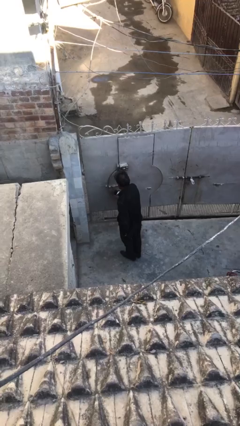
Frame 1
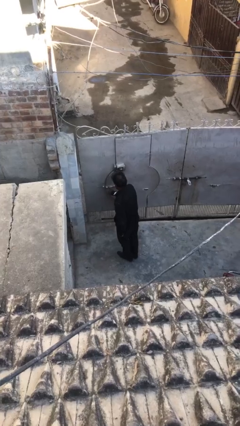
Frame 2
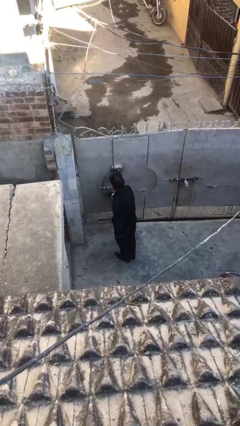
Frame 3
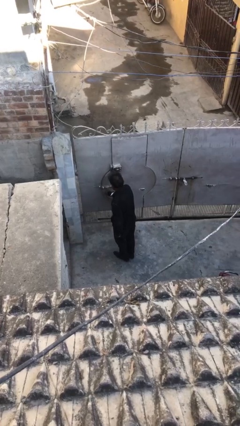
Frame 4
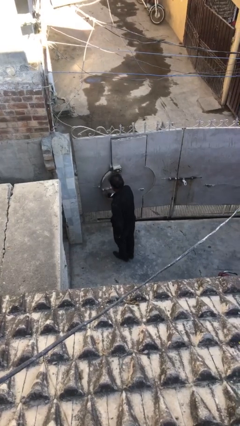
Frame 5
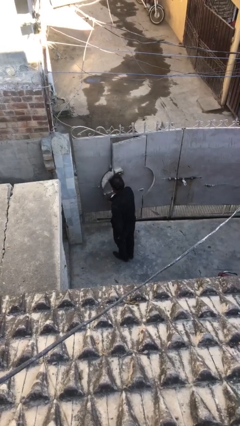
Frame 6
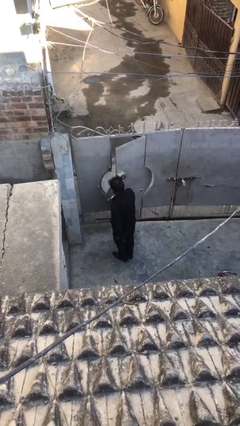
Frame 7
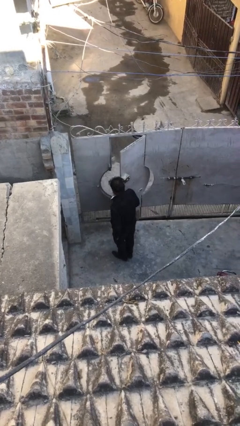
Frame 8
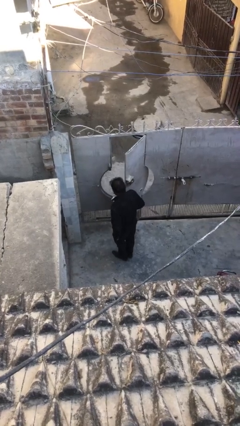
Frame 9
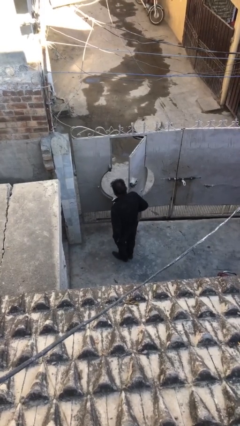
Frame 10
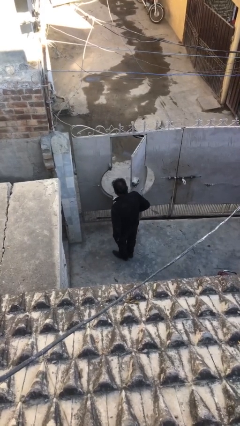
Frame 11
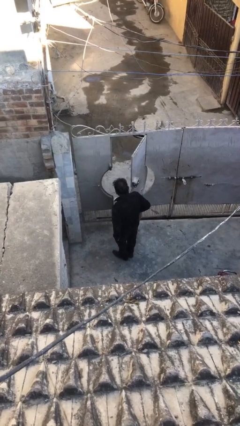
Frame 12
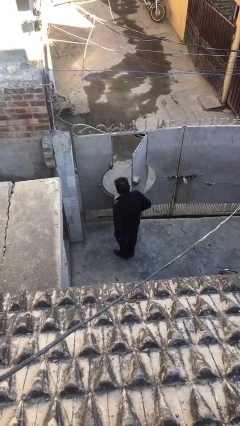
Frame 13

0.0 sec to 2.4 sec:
person opens facility door

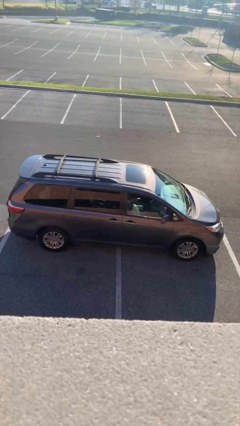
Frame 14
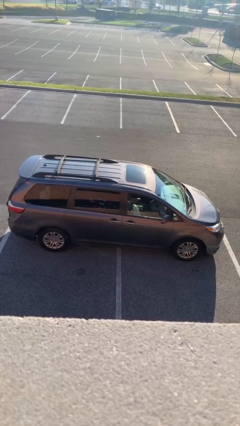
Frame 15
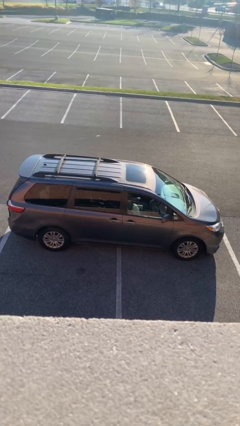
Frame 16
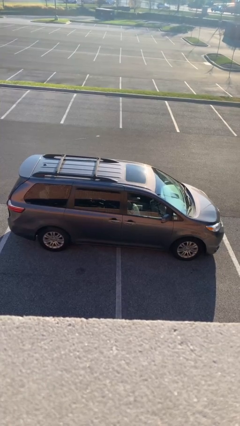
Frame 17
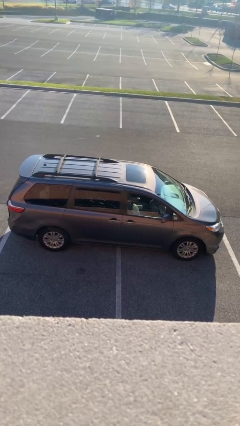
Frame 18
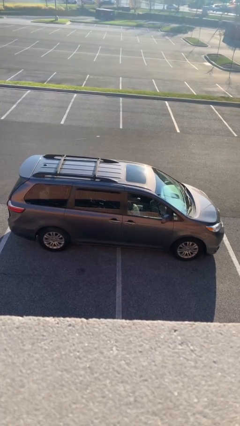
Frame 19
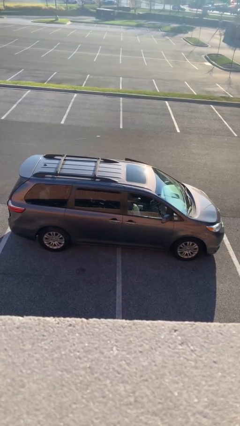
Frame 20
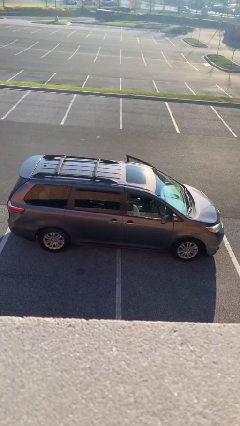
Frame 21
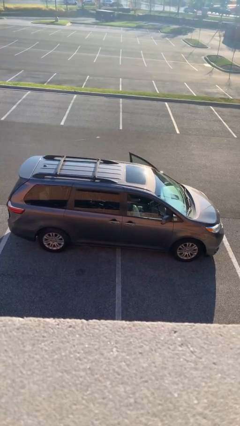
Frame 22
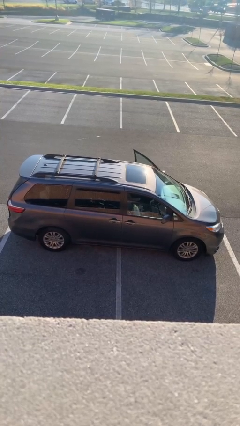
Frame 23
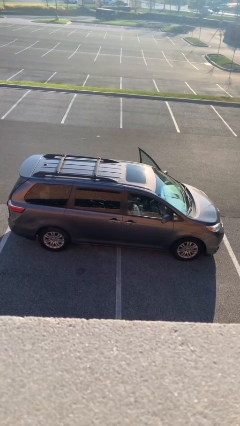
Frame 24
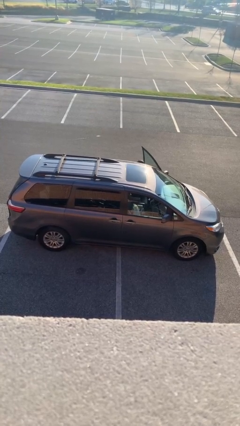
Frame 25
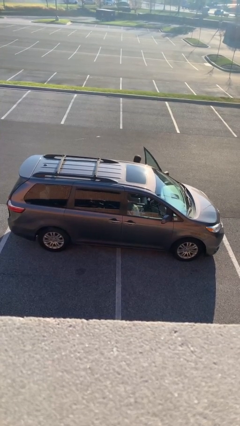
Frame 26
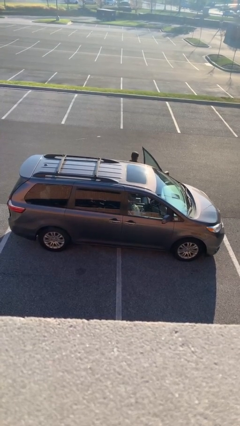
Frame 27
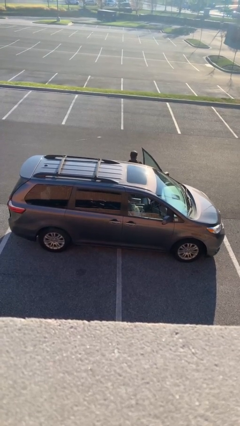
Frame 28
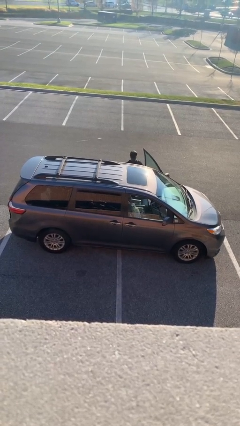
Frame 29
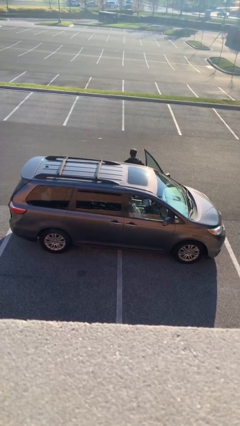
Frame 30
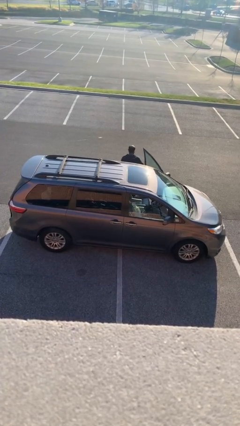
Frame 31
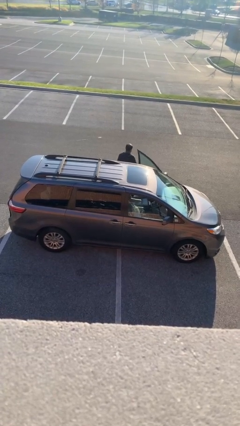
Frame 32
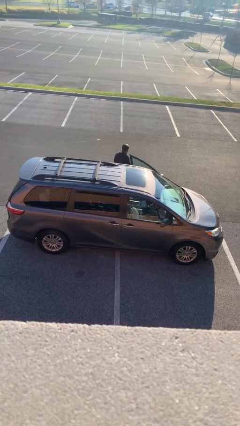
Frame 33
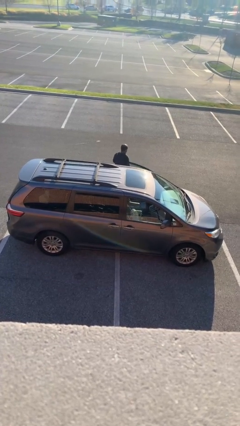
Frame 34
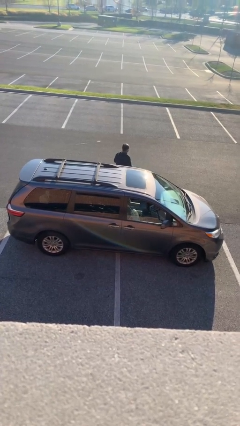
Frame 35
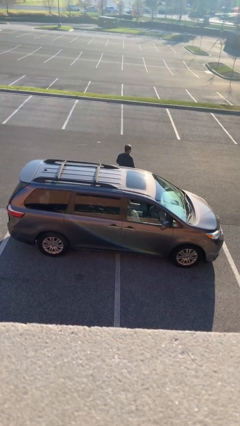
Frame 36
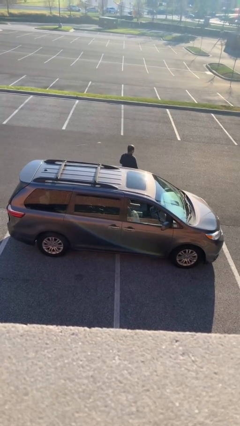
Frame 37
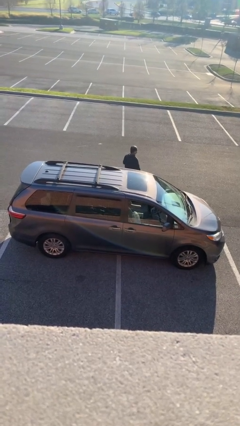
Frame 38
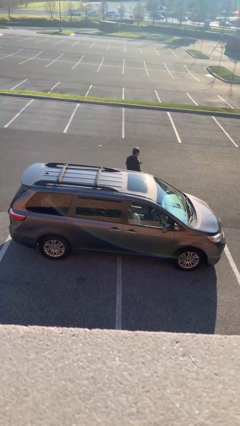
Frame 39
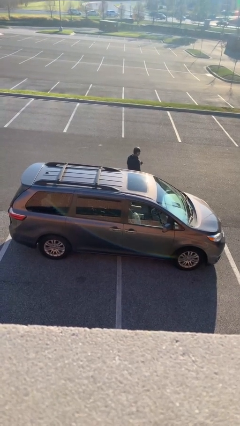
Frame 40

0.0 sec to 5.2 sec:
car drops off person

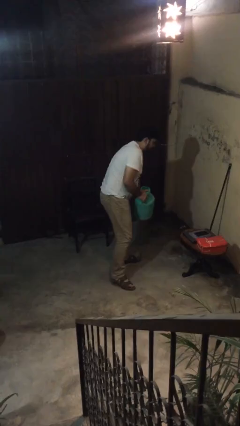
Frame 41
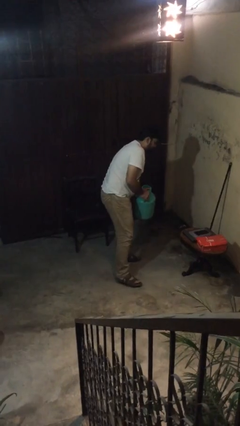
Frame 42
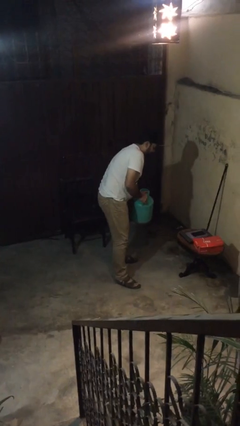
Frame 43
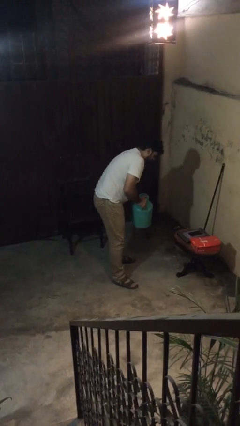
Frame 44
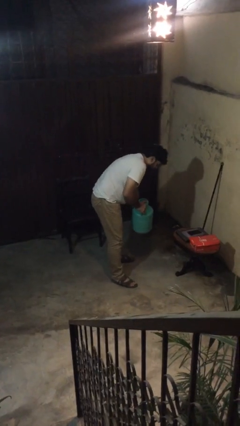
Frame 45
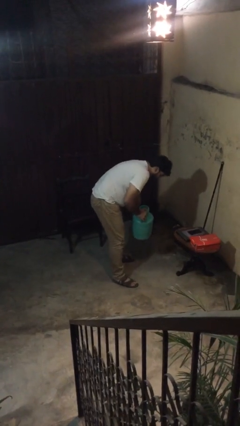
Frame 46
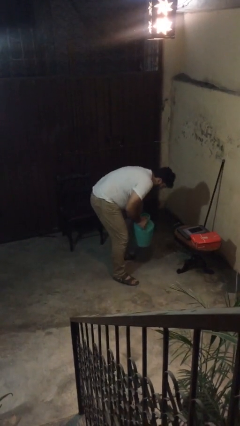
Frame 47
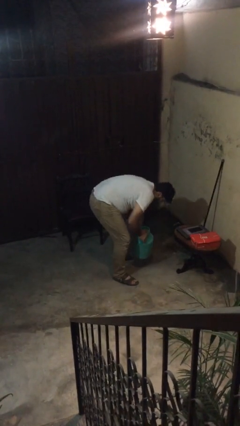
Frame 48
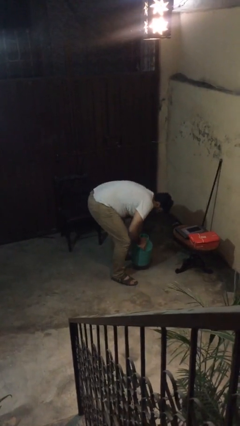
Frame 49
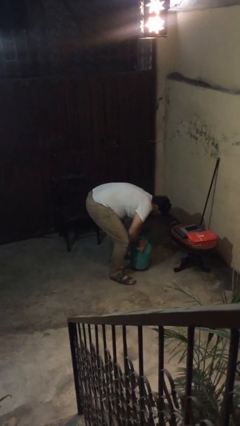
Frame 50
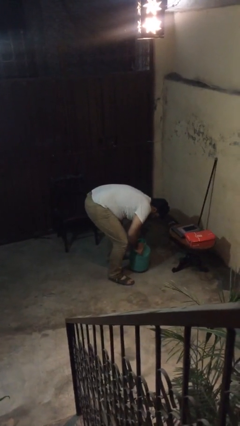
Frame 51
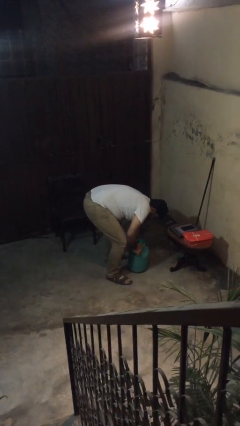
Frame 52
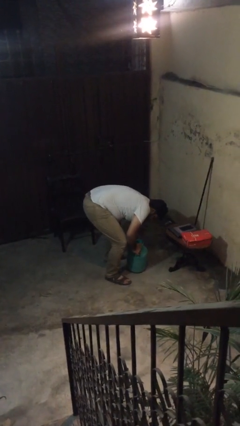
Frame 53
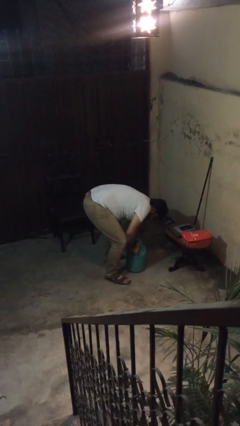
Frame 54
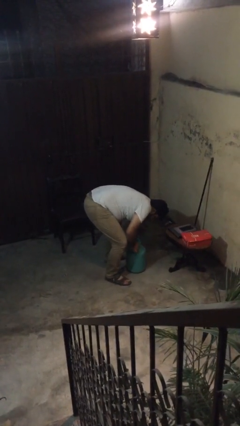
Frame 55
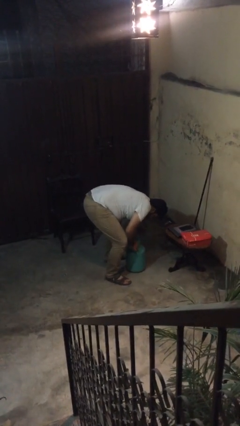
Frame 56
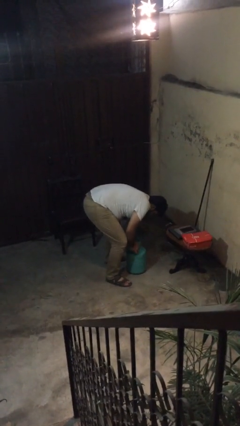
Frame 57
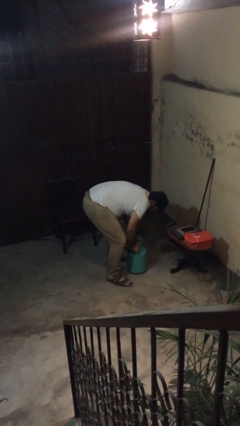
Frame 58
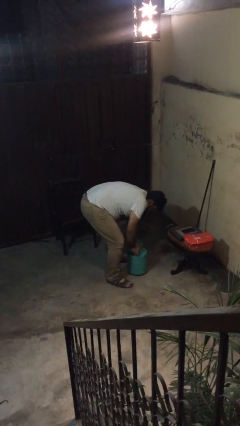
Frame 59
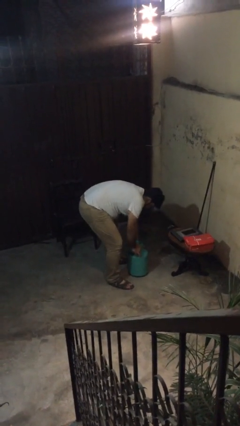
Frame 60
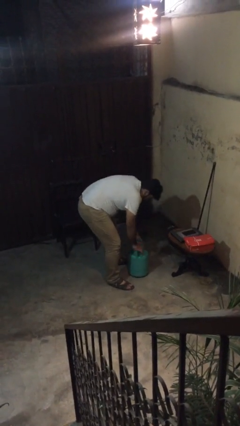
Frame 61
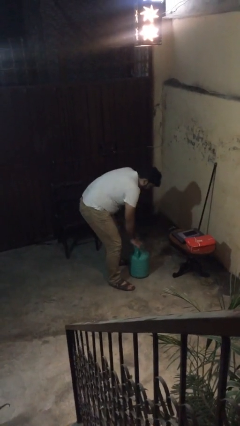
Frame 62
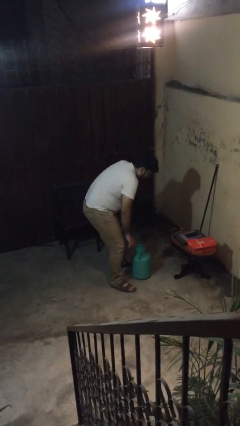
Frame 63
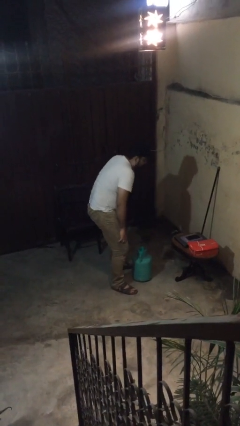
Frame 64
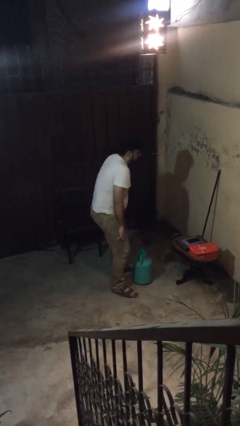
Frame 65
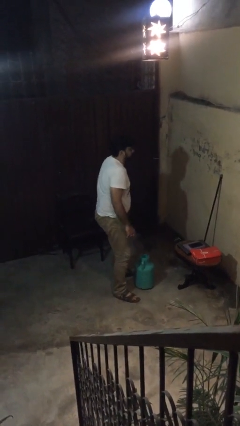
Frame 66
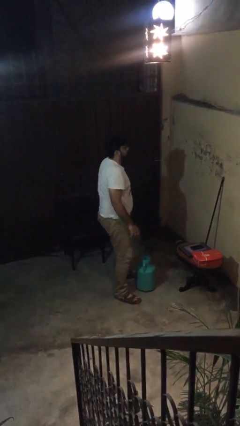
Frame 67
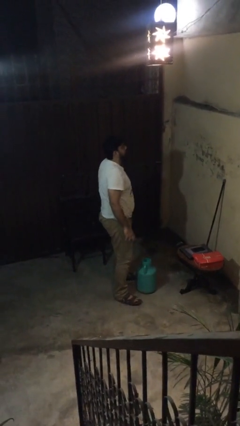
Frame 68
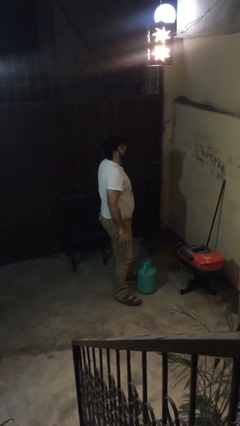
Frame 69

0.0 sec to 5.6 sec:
person puts down object on floor

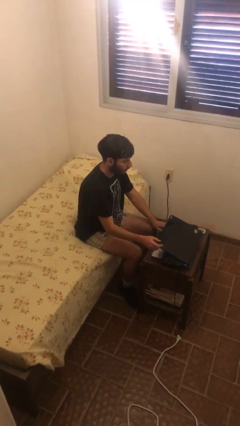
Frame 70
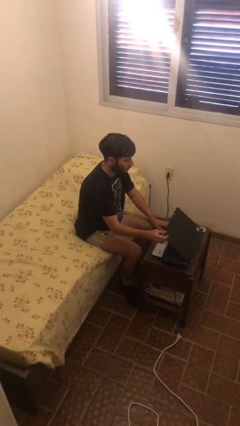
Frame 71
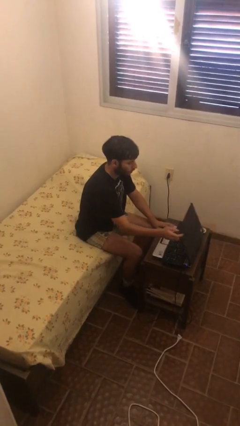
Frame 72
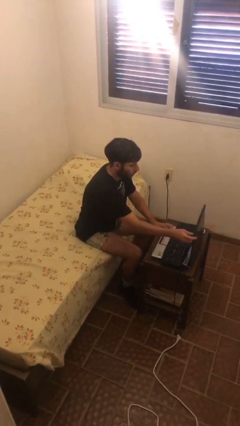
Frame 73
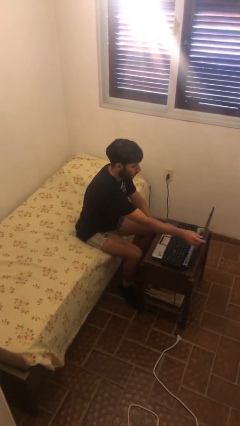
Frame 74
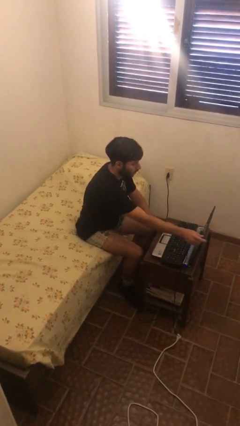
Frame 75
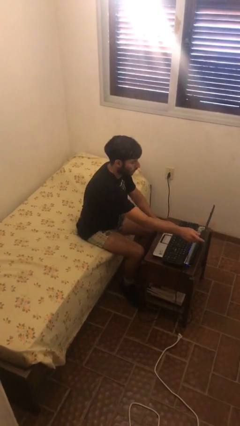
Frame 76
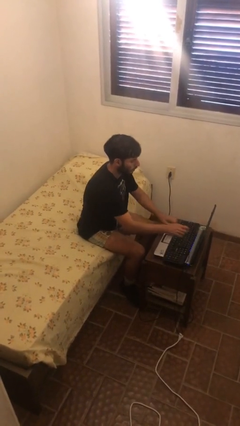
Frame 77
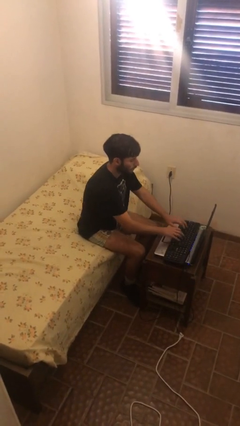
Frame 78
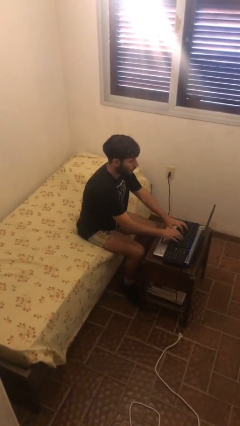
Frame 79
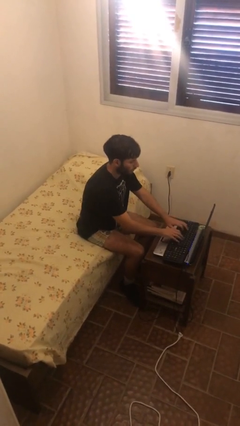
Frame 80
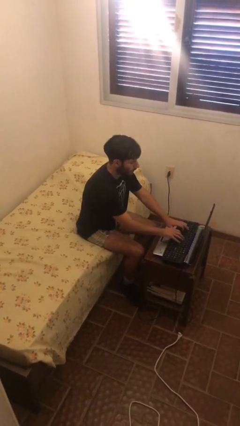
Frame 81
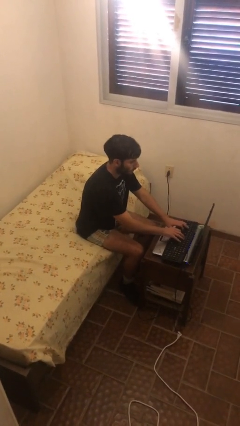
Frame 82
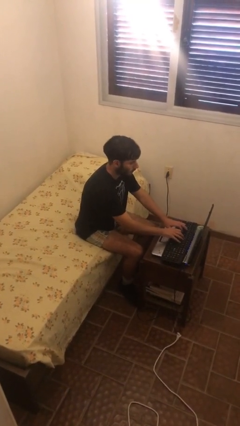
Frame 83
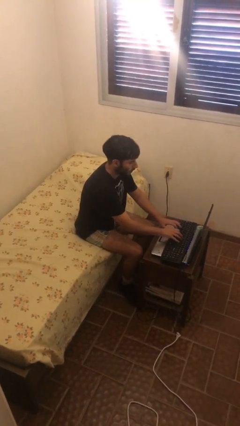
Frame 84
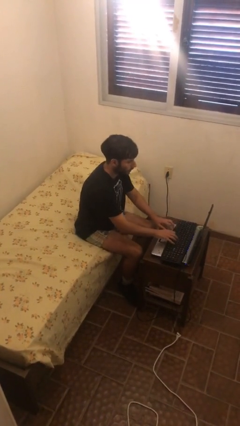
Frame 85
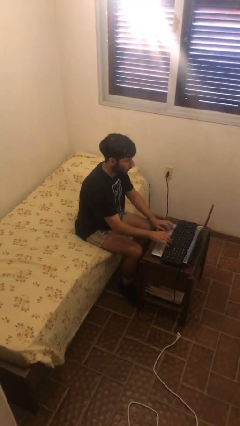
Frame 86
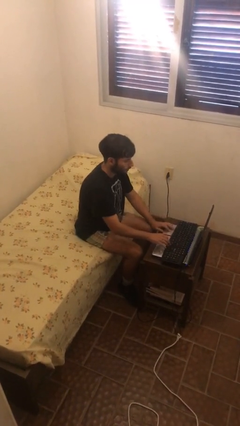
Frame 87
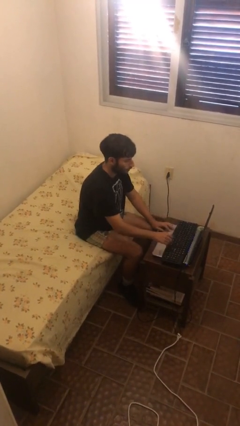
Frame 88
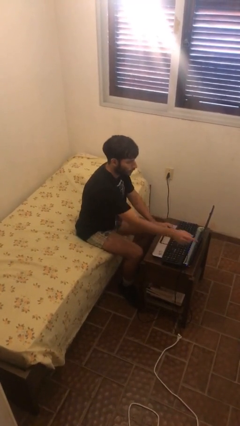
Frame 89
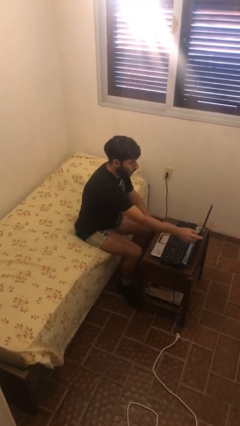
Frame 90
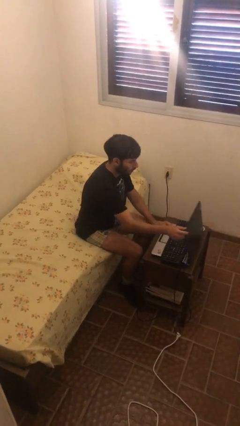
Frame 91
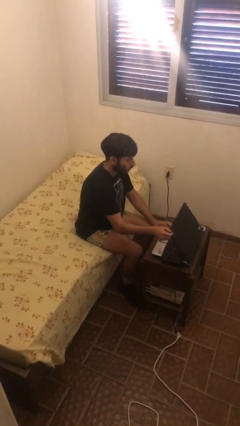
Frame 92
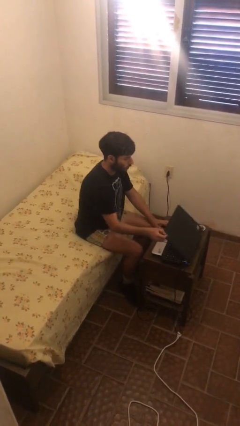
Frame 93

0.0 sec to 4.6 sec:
person interacts with laptop
